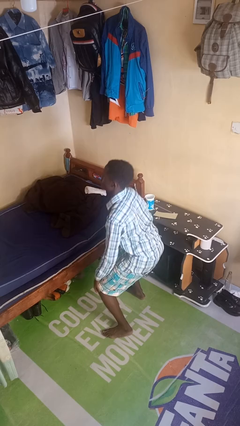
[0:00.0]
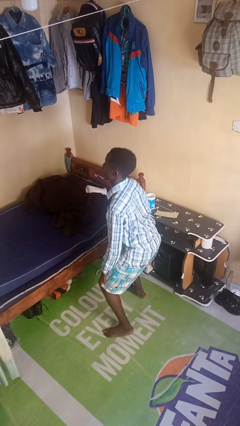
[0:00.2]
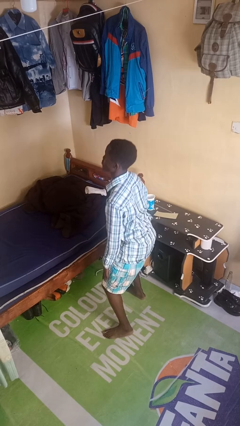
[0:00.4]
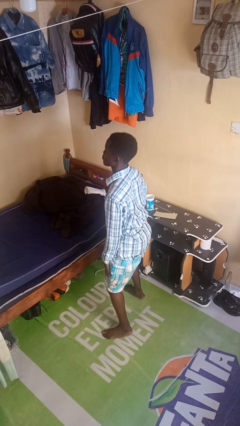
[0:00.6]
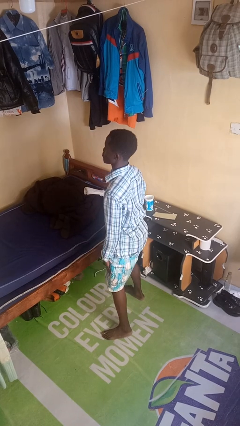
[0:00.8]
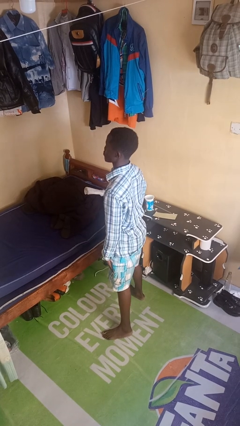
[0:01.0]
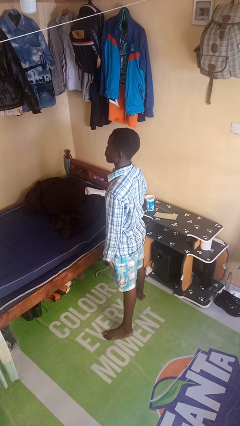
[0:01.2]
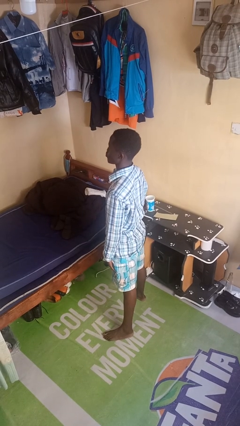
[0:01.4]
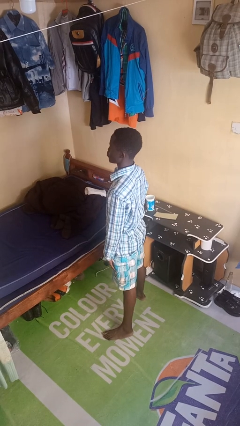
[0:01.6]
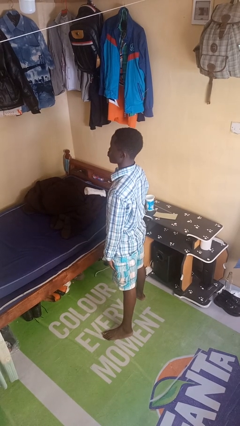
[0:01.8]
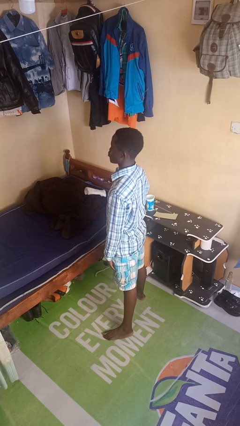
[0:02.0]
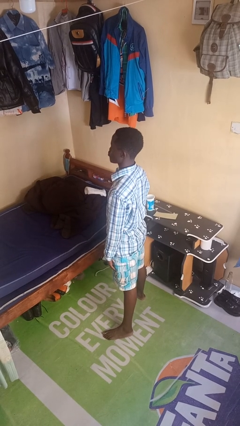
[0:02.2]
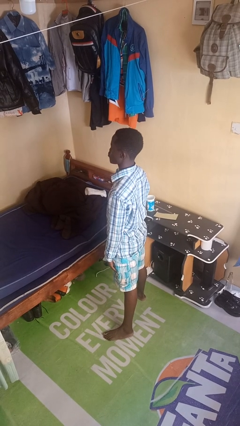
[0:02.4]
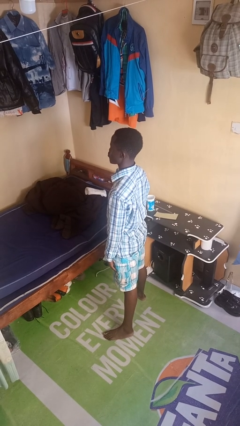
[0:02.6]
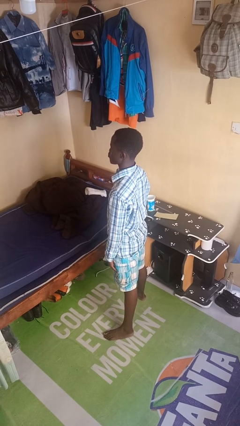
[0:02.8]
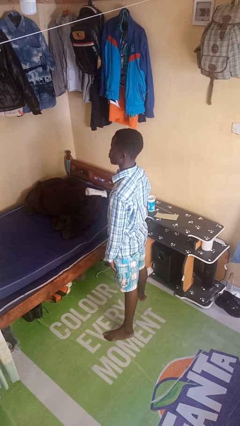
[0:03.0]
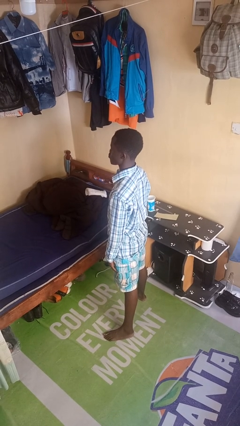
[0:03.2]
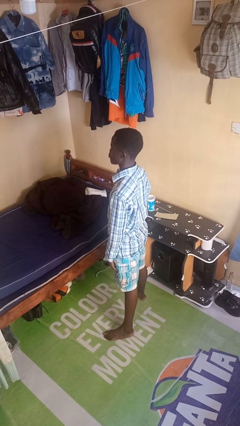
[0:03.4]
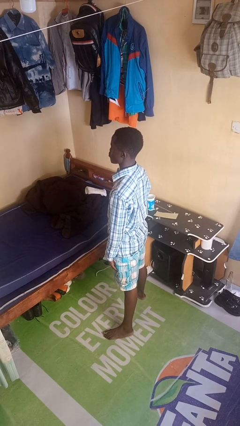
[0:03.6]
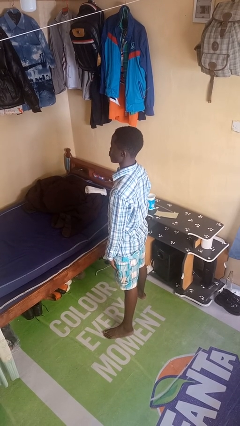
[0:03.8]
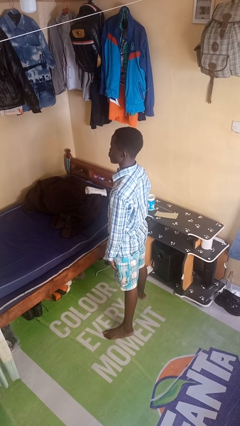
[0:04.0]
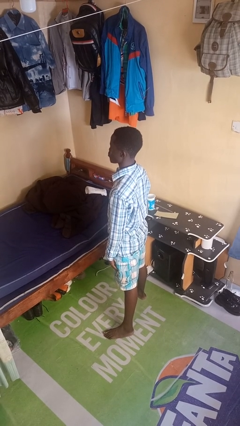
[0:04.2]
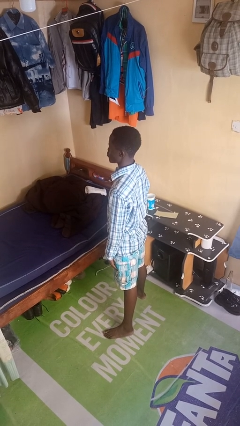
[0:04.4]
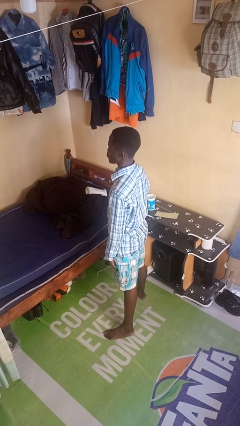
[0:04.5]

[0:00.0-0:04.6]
person stands up

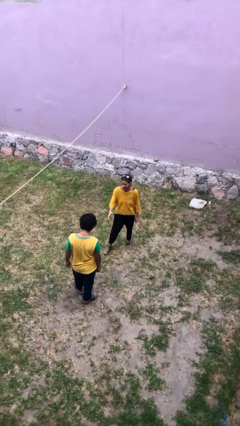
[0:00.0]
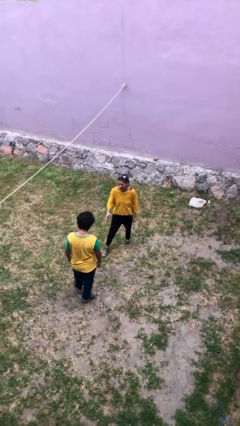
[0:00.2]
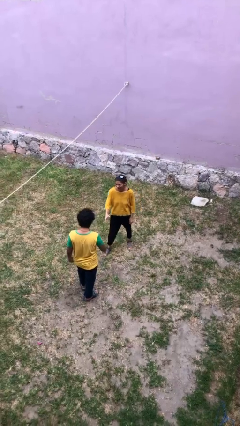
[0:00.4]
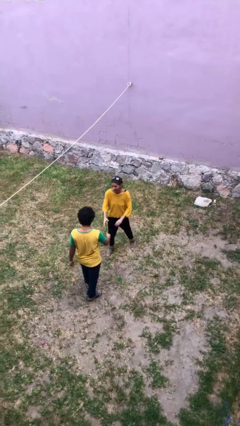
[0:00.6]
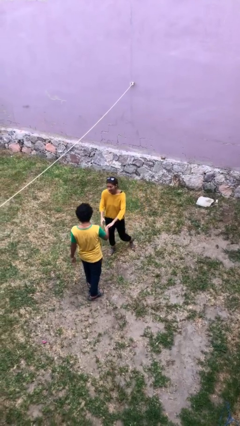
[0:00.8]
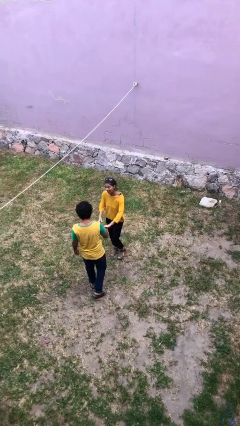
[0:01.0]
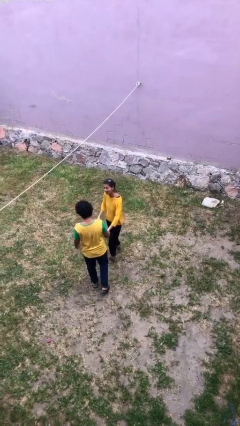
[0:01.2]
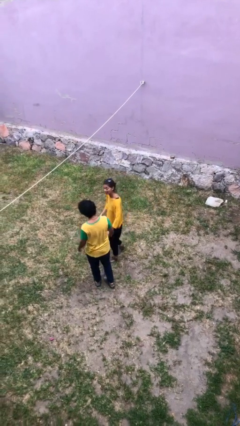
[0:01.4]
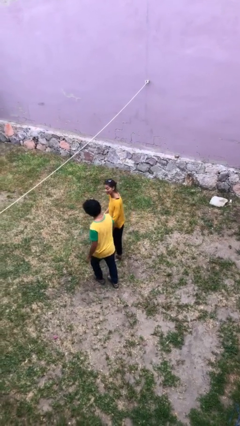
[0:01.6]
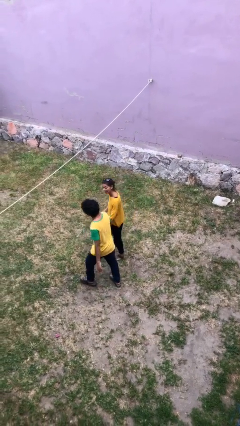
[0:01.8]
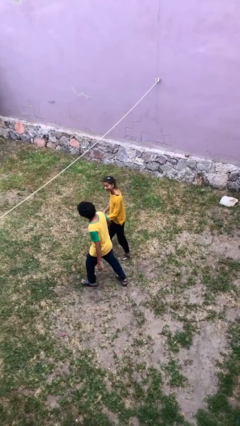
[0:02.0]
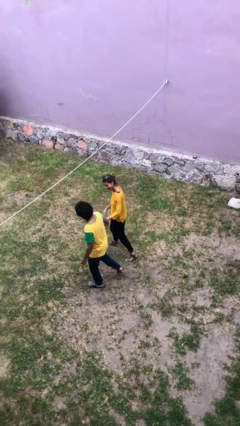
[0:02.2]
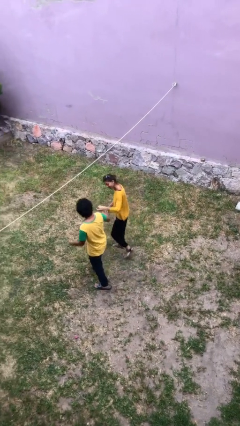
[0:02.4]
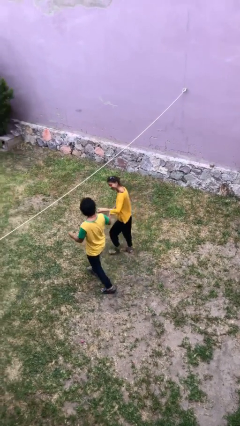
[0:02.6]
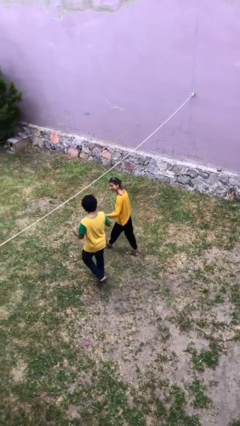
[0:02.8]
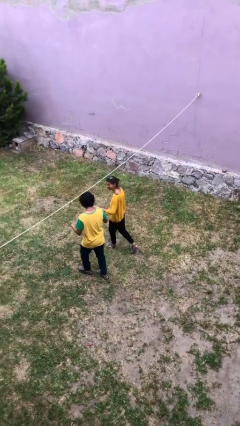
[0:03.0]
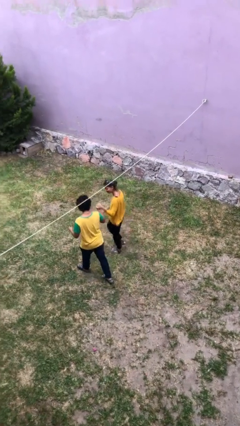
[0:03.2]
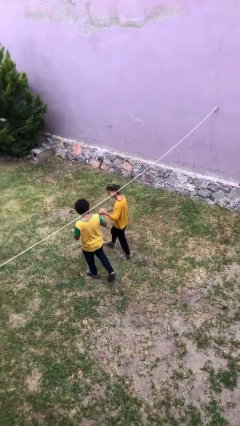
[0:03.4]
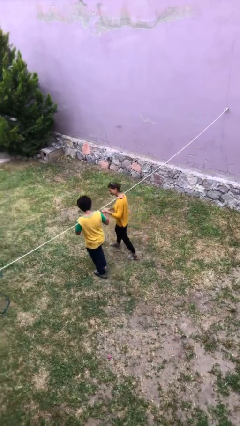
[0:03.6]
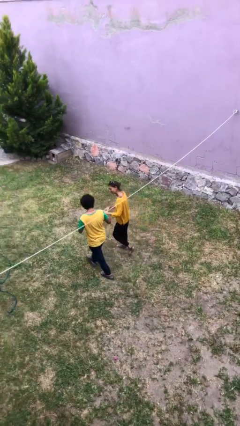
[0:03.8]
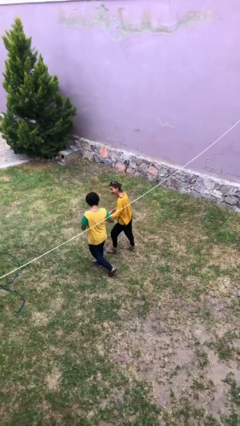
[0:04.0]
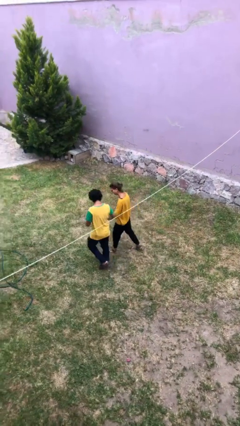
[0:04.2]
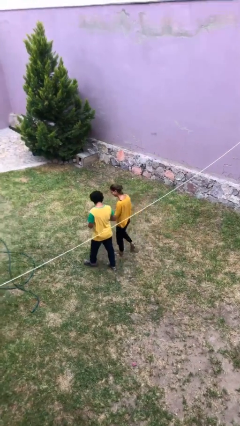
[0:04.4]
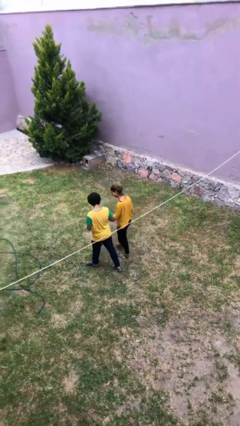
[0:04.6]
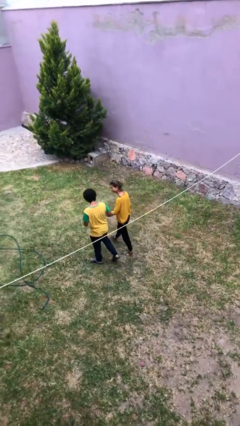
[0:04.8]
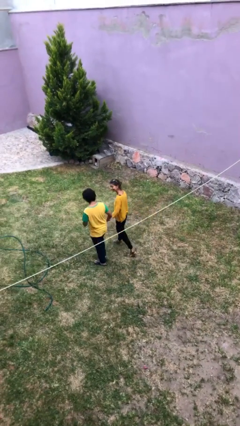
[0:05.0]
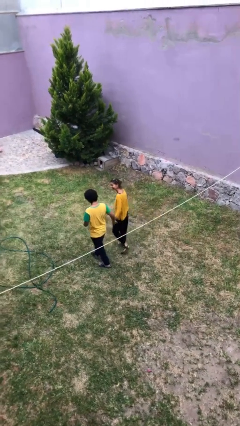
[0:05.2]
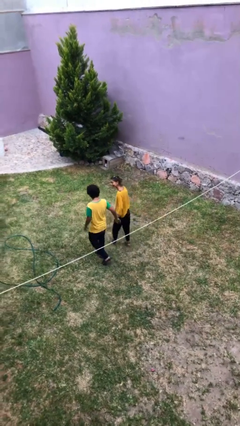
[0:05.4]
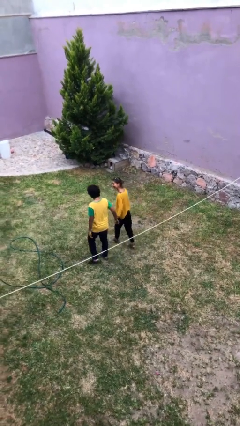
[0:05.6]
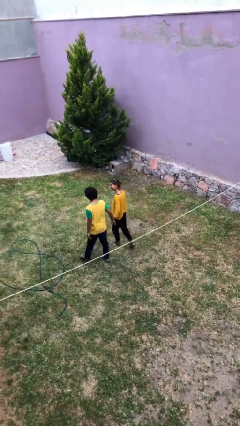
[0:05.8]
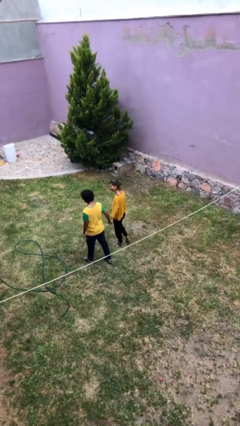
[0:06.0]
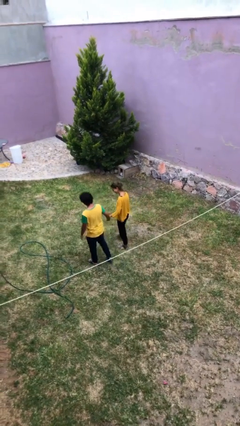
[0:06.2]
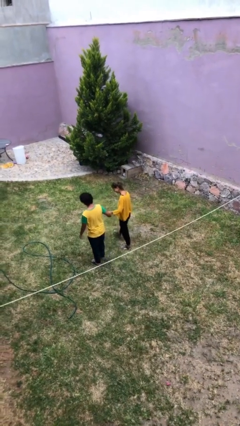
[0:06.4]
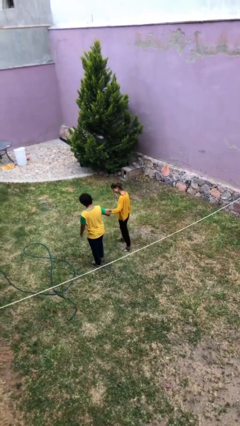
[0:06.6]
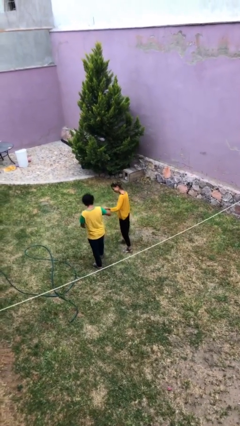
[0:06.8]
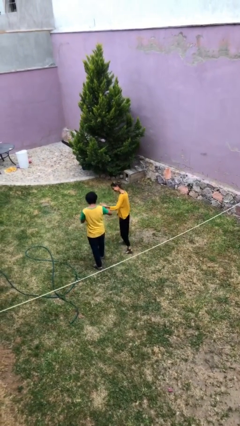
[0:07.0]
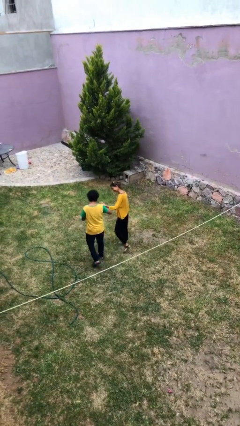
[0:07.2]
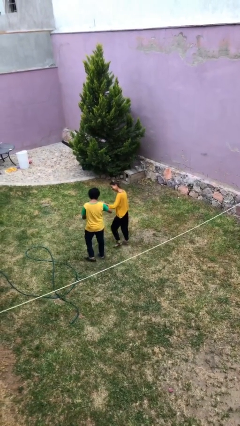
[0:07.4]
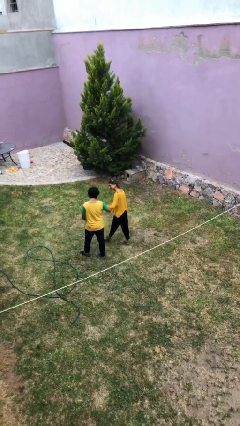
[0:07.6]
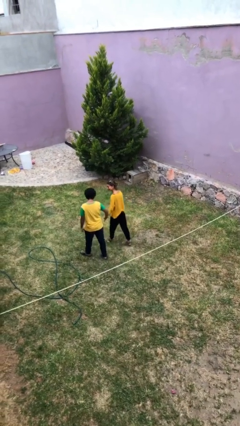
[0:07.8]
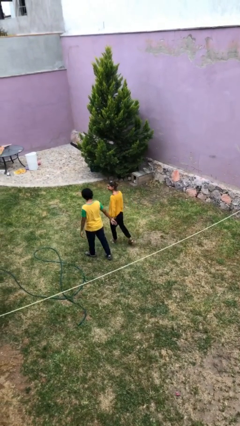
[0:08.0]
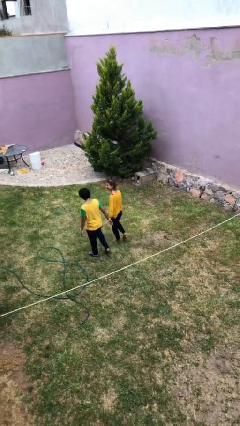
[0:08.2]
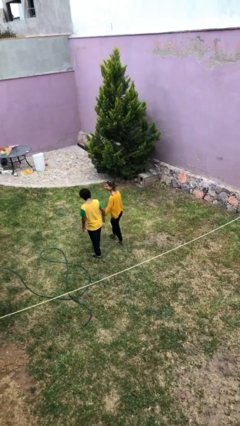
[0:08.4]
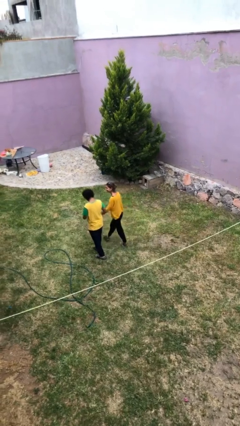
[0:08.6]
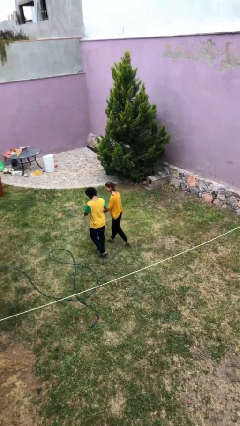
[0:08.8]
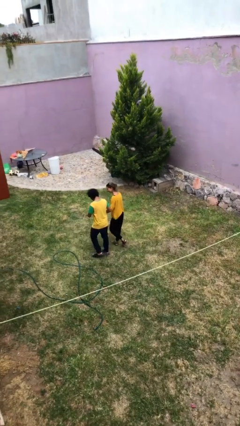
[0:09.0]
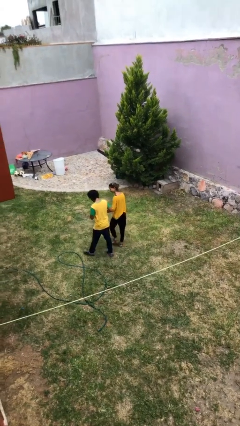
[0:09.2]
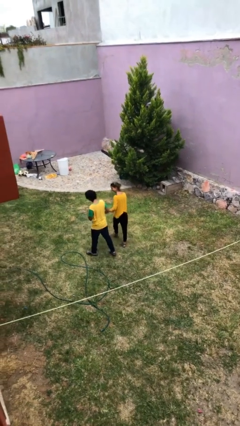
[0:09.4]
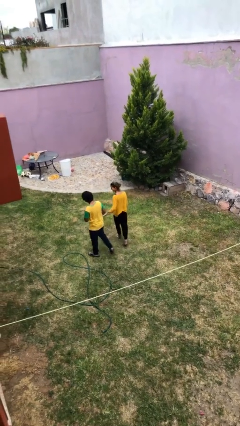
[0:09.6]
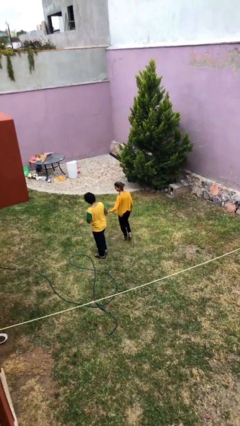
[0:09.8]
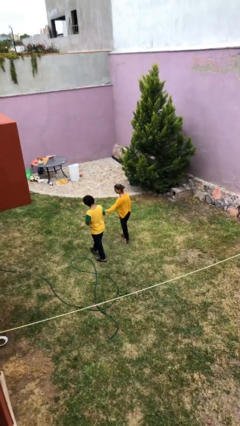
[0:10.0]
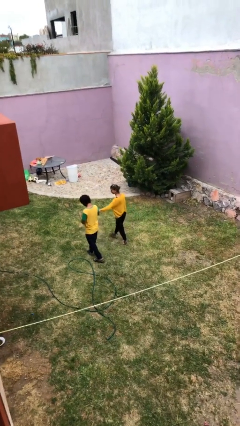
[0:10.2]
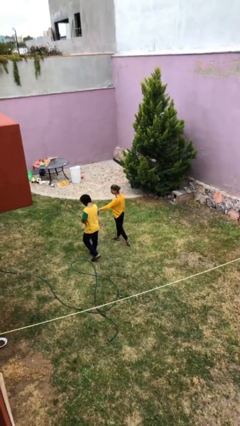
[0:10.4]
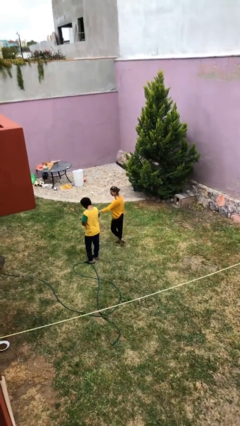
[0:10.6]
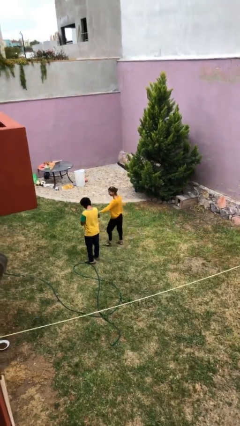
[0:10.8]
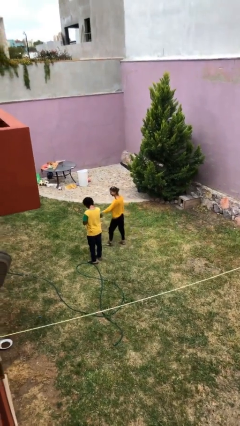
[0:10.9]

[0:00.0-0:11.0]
person holds hand

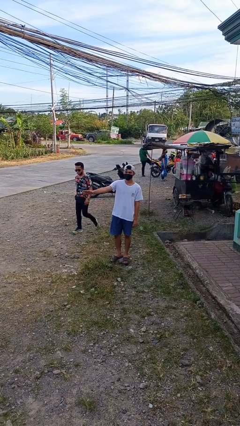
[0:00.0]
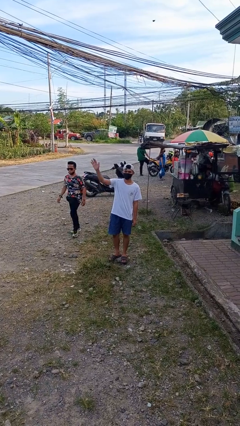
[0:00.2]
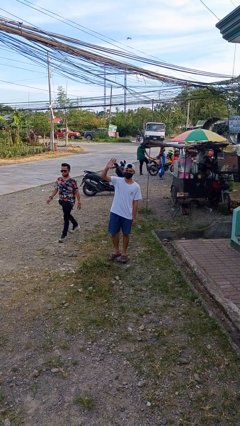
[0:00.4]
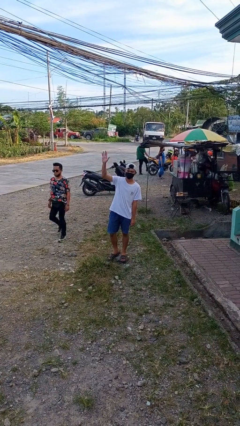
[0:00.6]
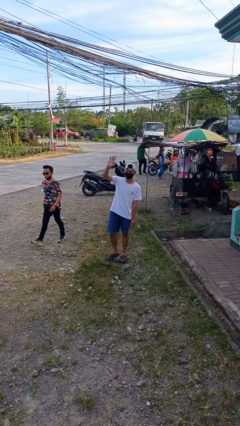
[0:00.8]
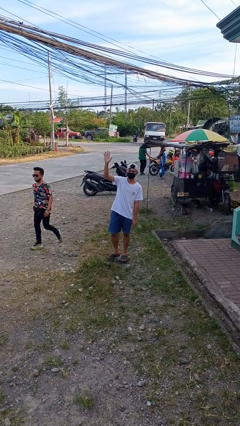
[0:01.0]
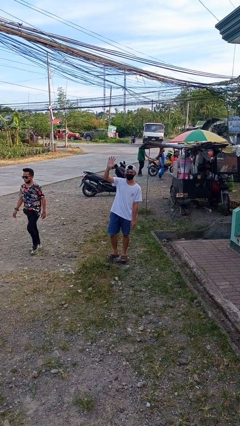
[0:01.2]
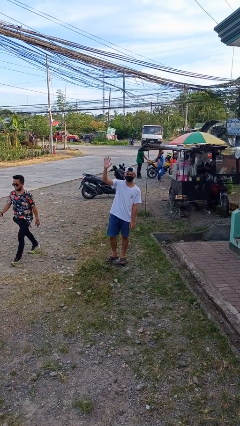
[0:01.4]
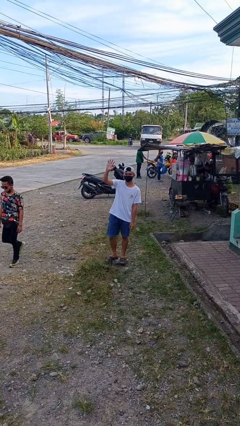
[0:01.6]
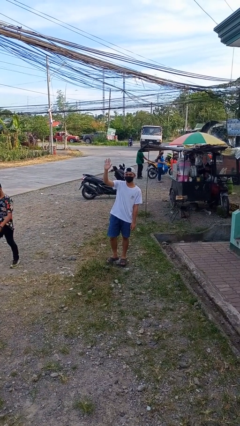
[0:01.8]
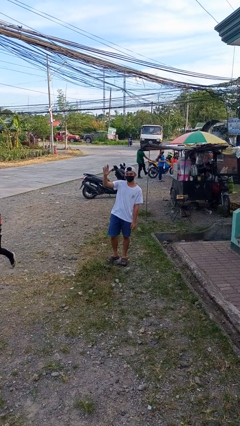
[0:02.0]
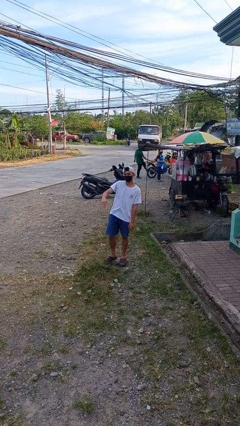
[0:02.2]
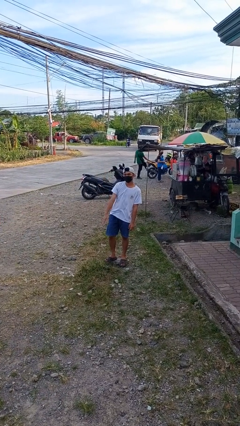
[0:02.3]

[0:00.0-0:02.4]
person waves at person
